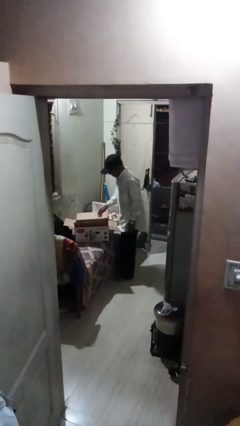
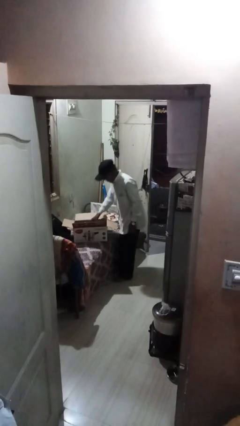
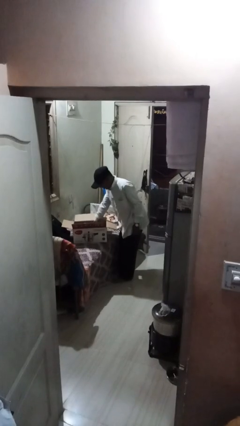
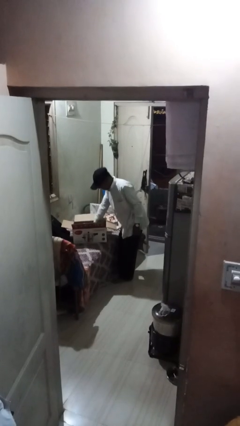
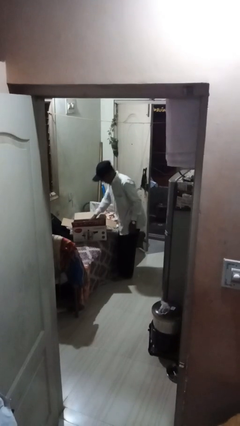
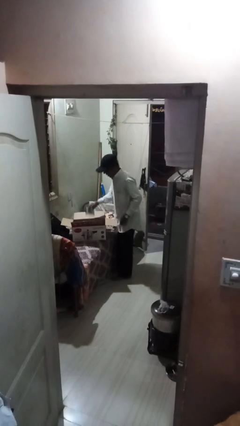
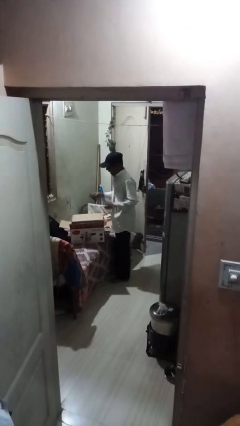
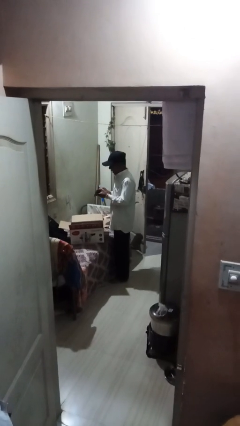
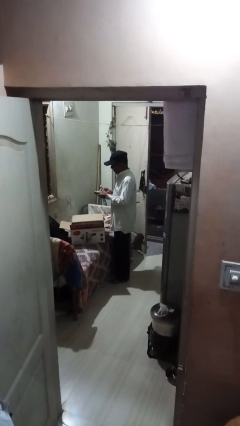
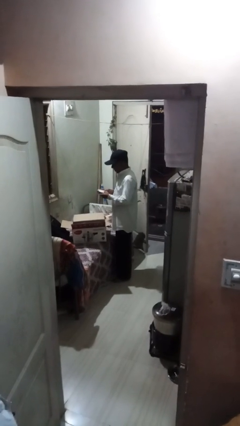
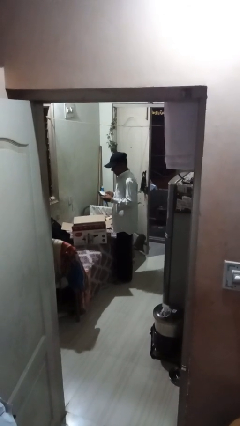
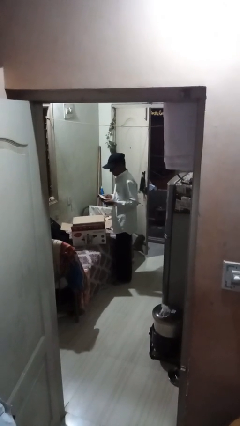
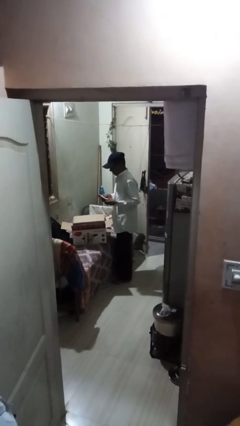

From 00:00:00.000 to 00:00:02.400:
person takes object from box

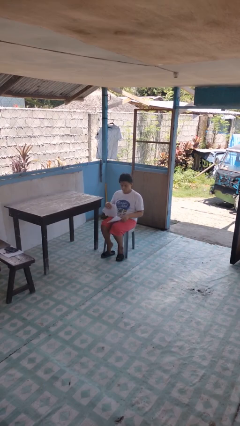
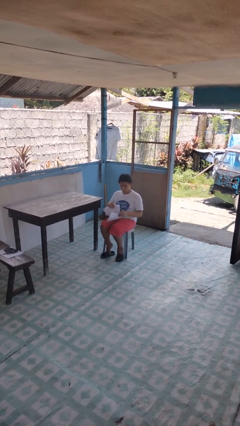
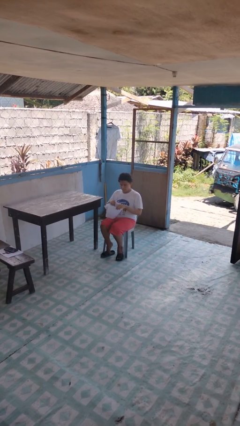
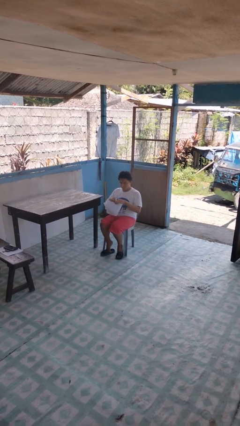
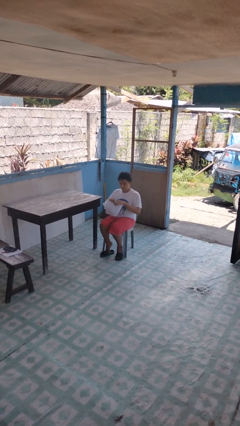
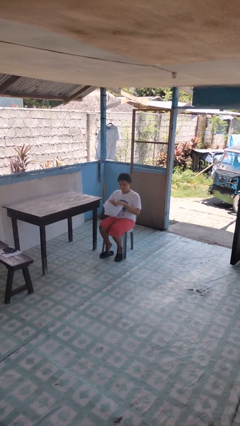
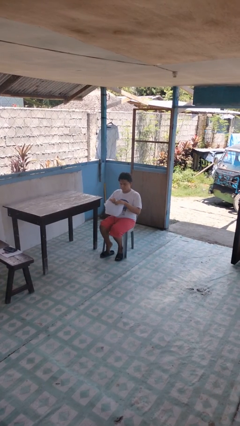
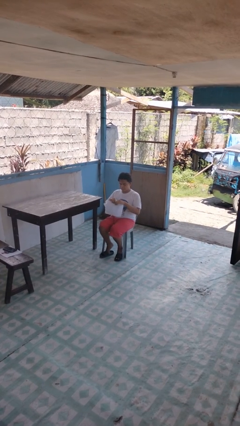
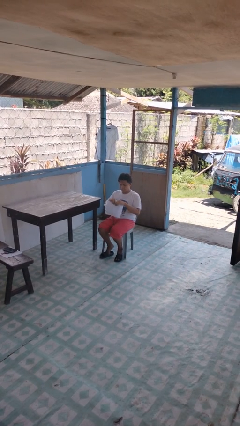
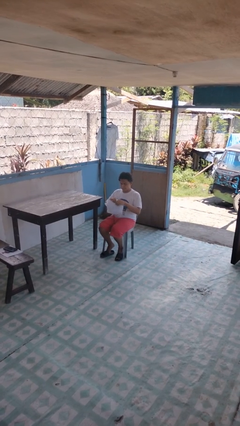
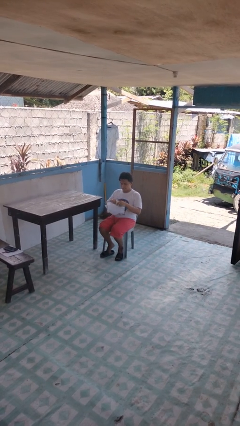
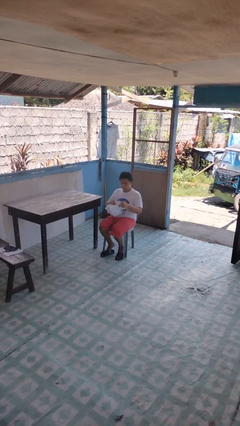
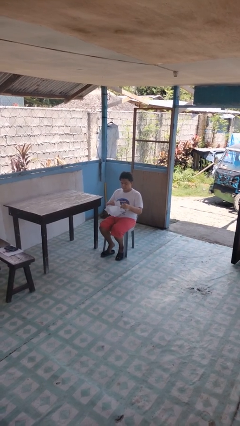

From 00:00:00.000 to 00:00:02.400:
person tears paper

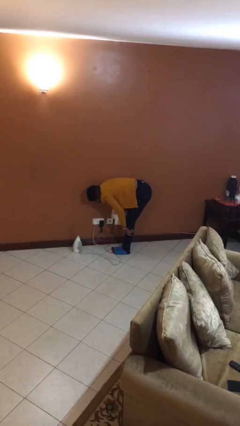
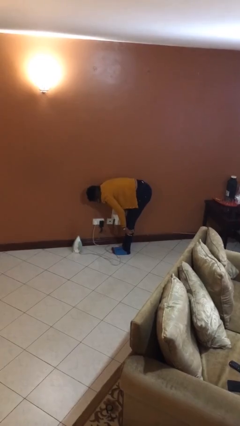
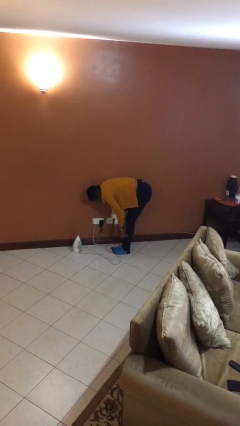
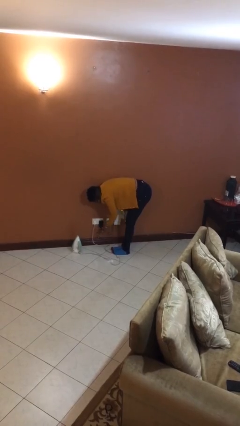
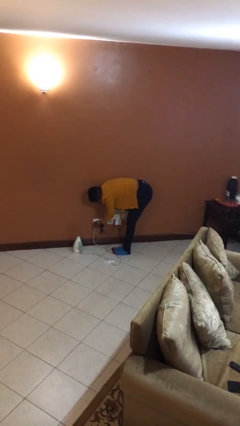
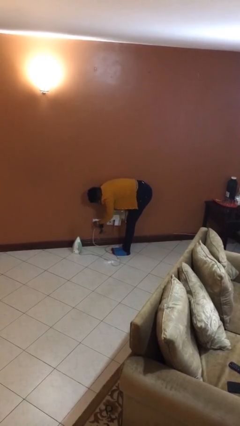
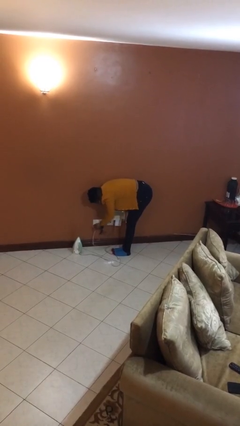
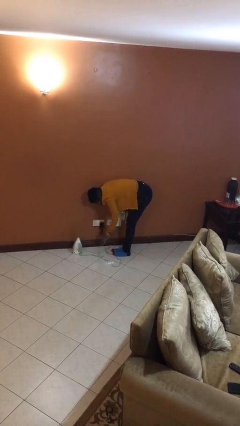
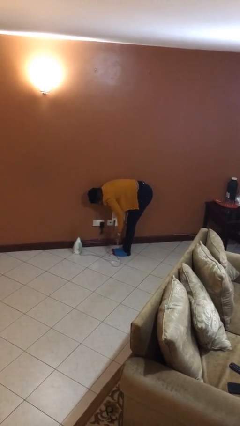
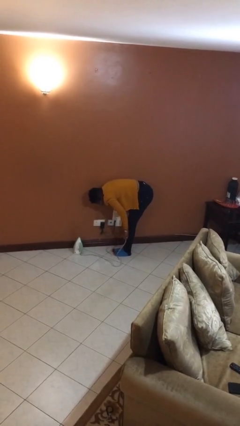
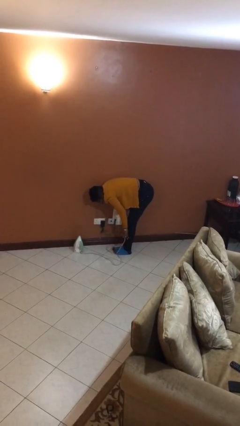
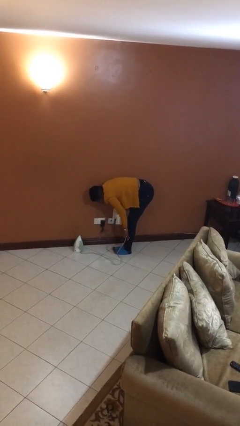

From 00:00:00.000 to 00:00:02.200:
person unplugs from electrical socket

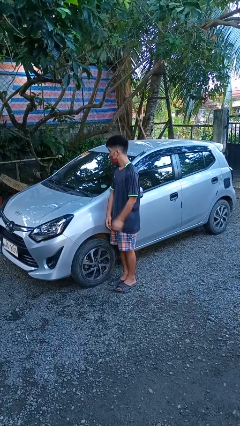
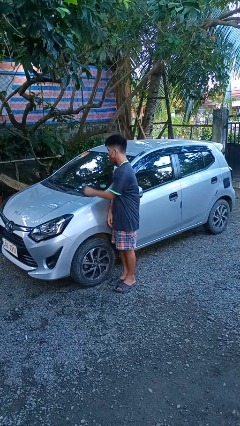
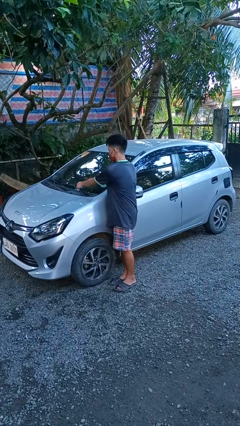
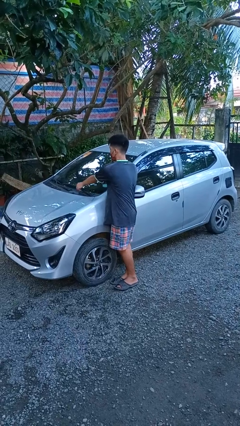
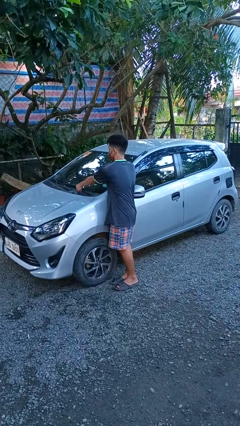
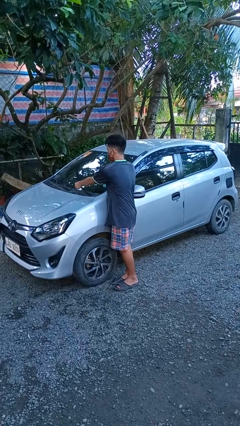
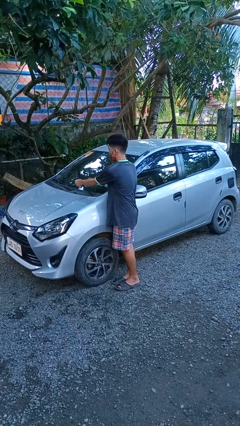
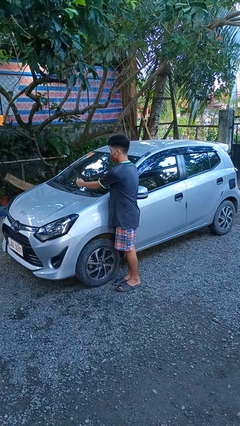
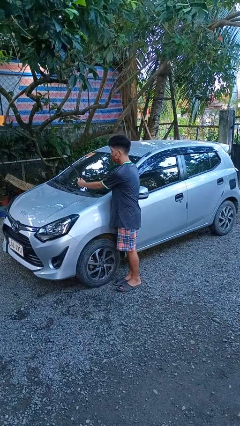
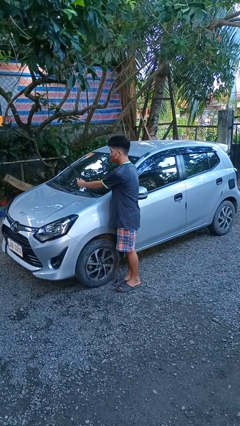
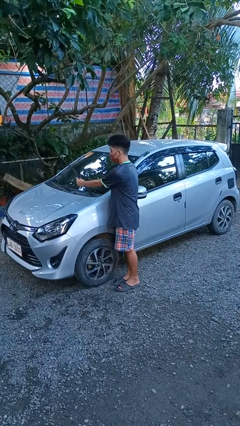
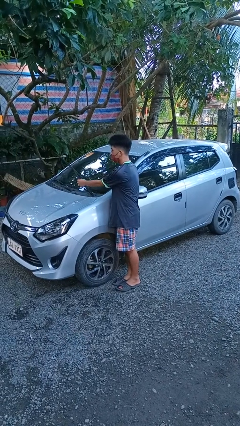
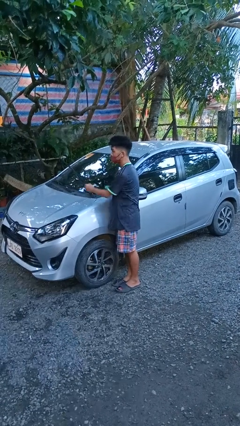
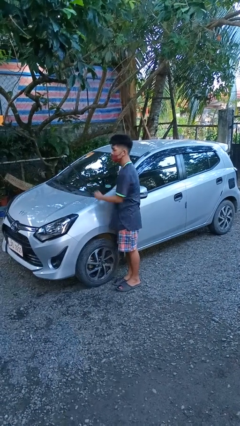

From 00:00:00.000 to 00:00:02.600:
person flips up car wipers

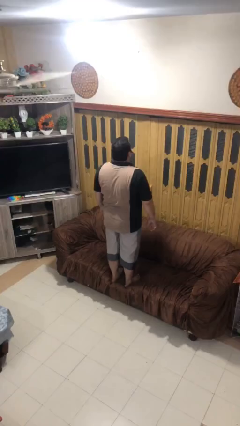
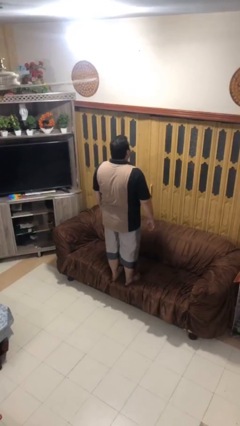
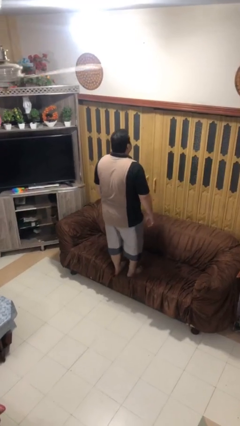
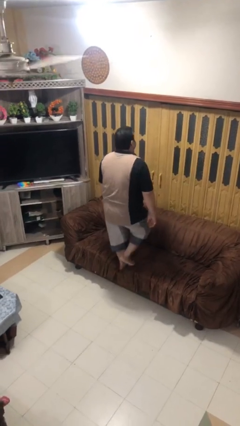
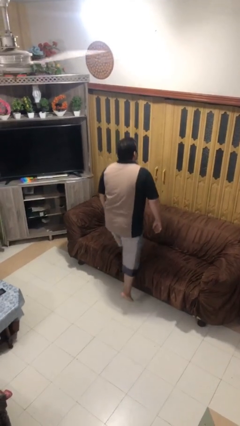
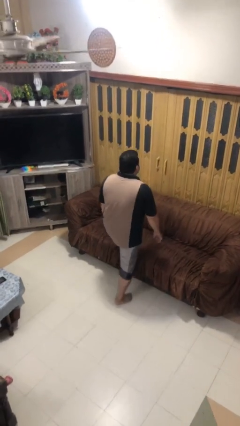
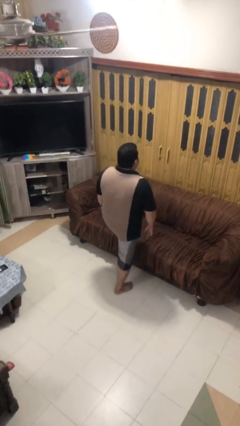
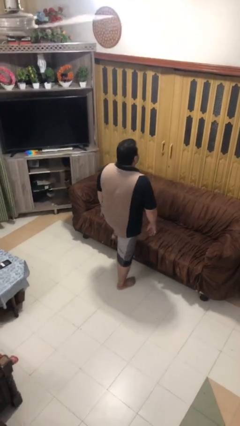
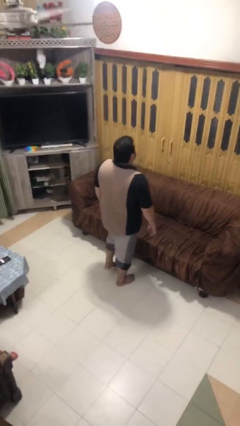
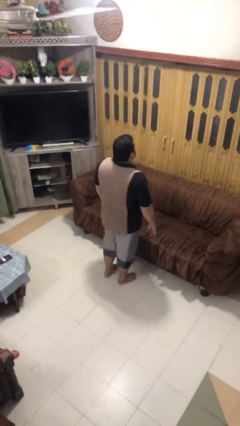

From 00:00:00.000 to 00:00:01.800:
person climbs off couch

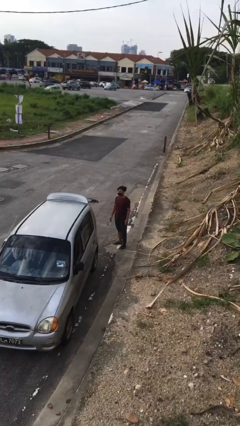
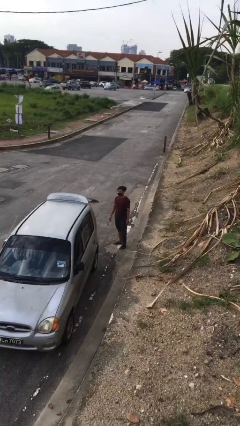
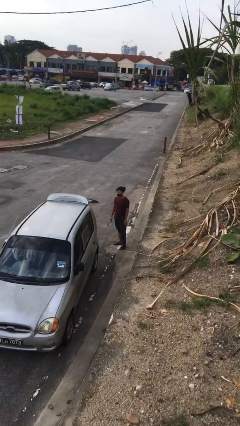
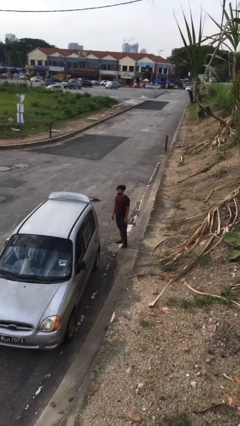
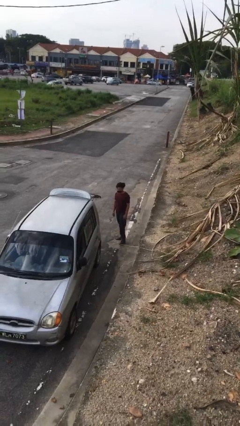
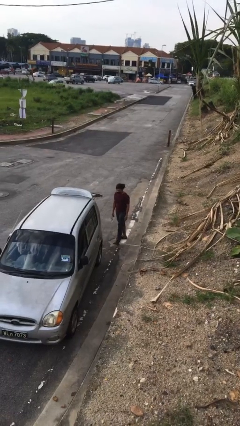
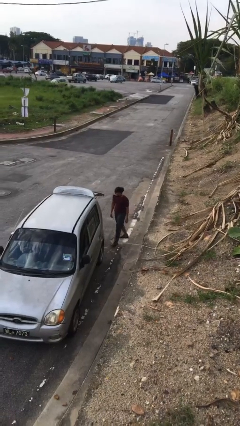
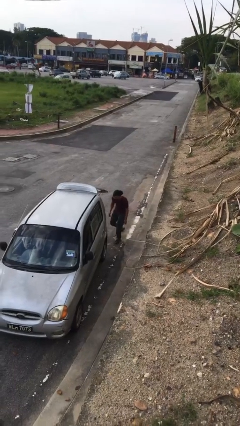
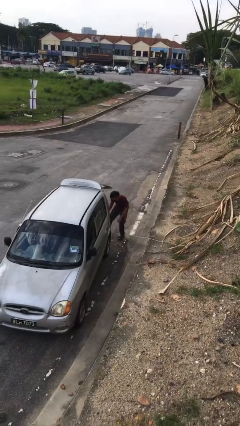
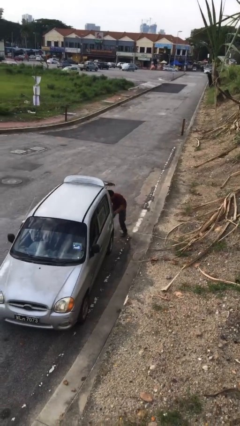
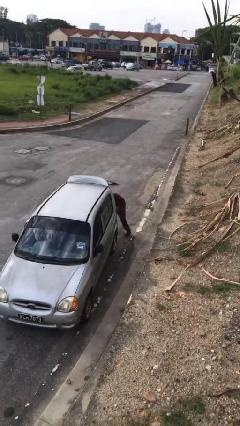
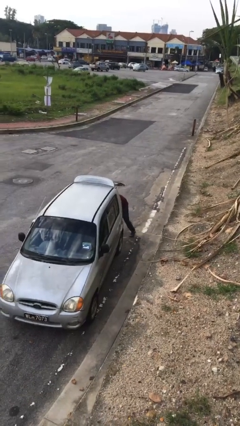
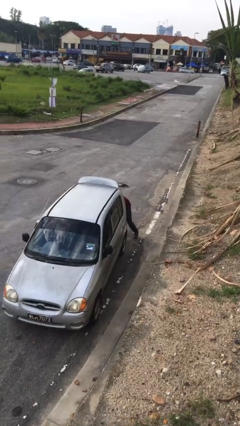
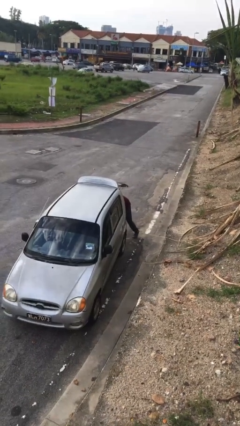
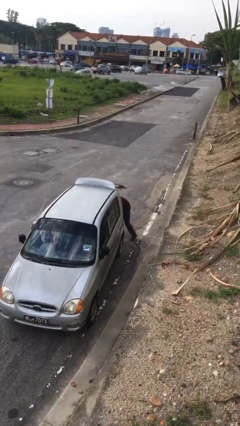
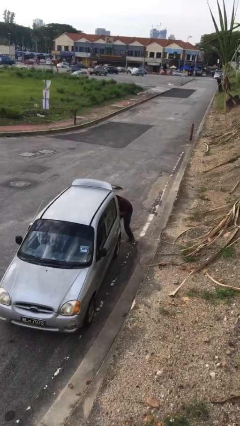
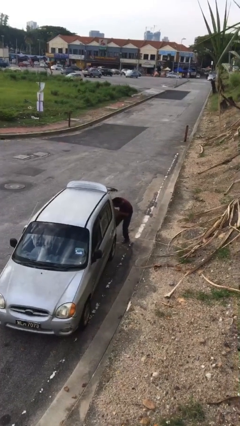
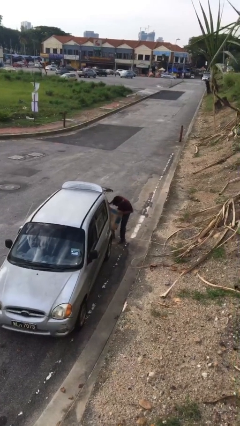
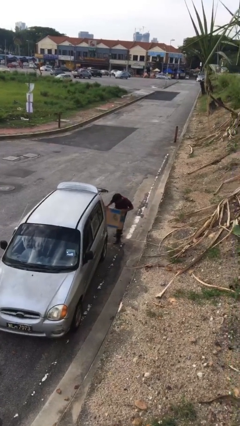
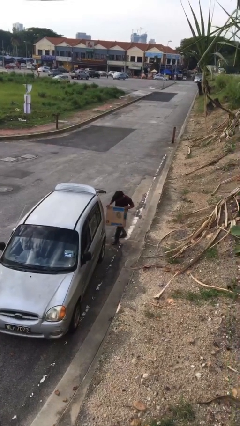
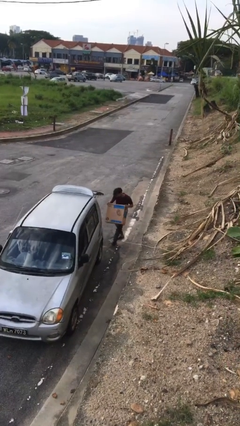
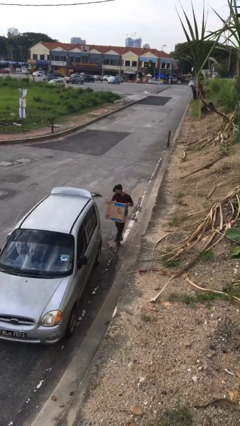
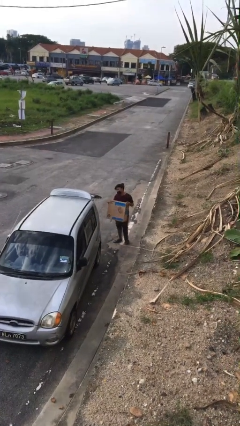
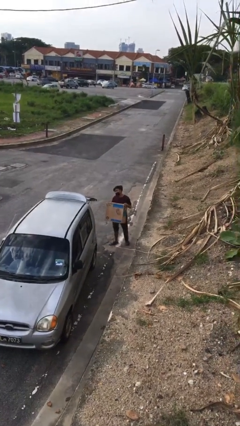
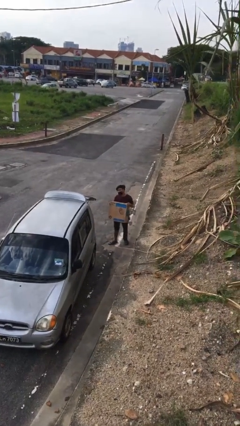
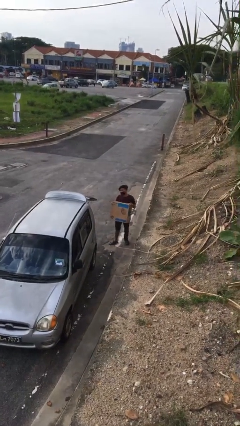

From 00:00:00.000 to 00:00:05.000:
person unloads car

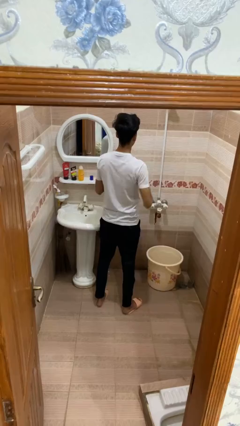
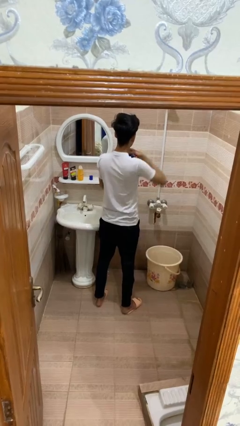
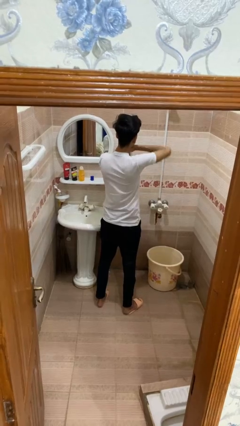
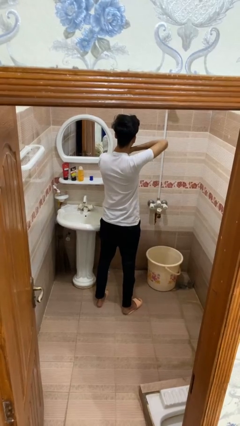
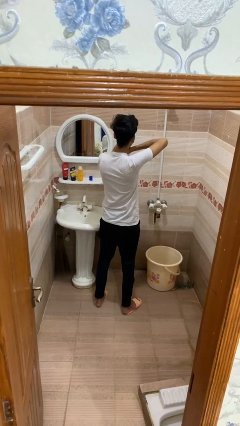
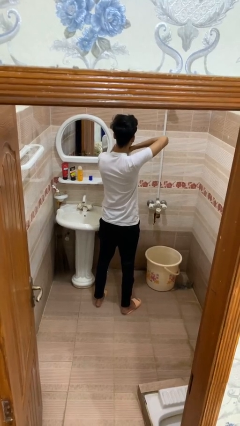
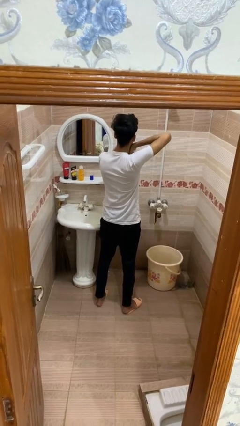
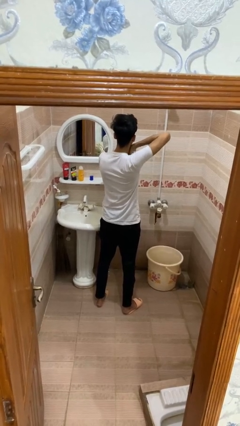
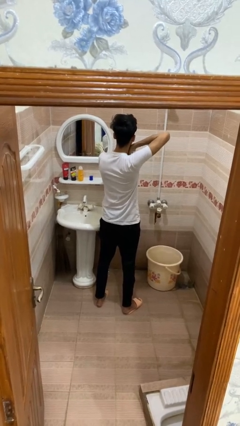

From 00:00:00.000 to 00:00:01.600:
person applies deodorant
